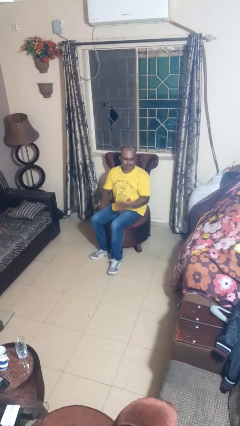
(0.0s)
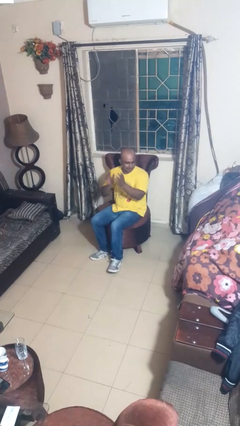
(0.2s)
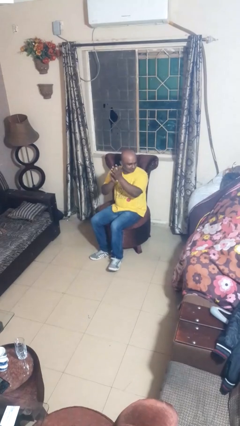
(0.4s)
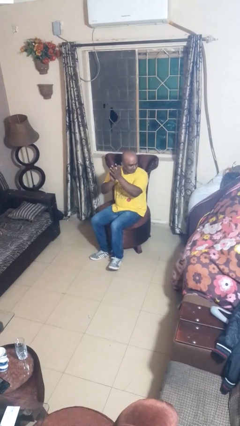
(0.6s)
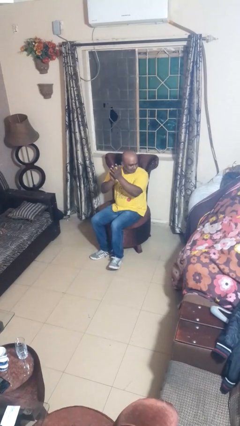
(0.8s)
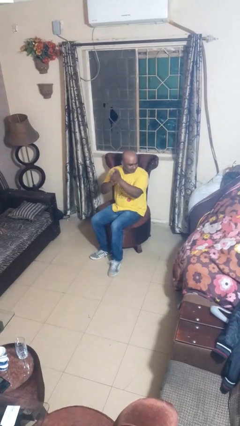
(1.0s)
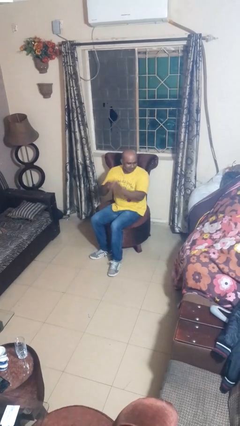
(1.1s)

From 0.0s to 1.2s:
person claps hands

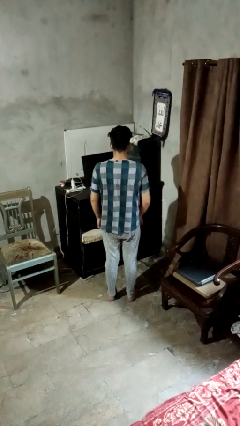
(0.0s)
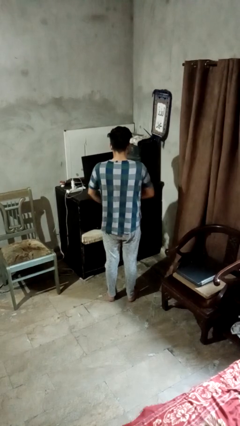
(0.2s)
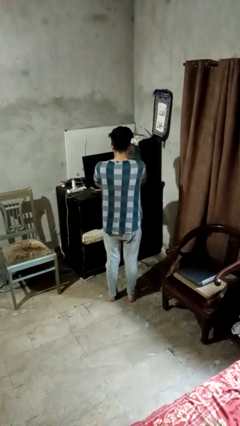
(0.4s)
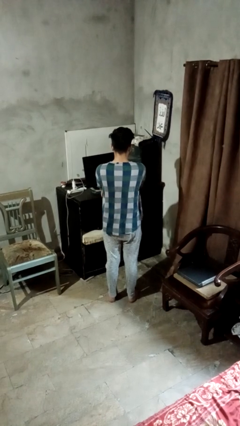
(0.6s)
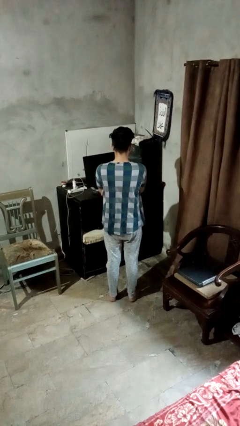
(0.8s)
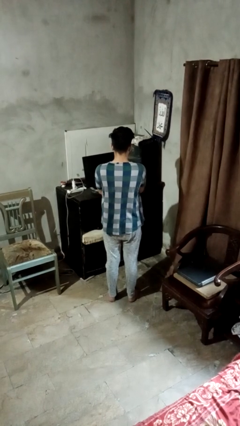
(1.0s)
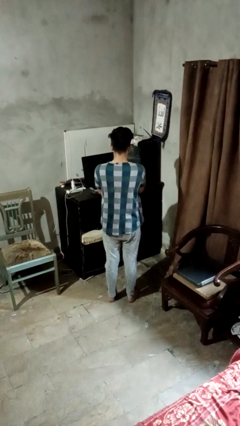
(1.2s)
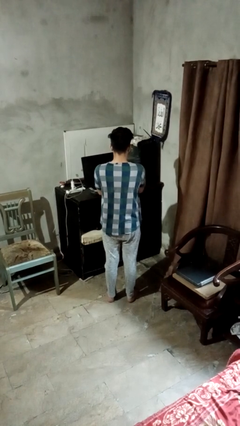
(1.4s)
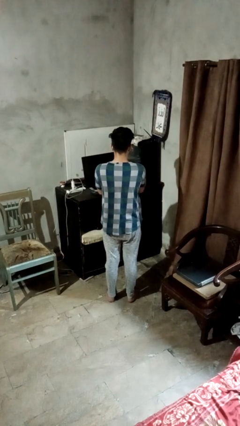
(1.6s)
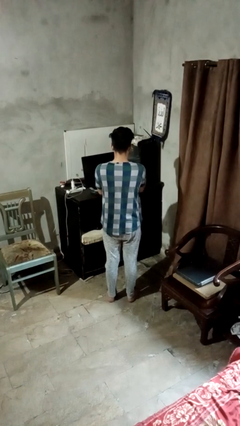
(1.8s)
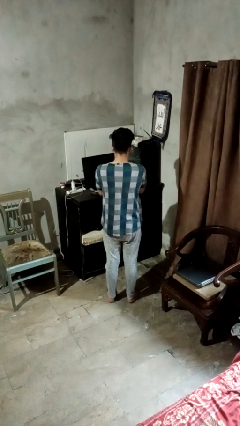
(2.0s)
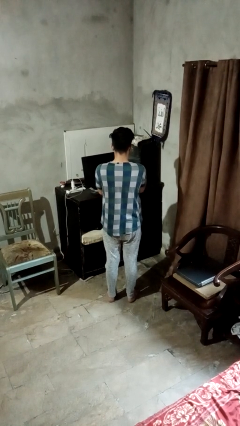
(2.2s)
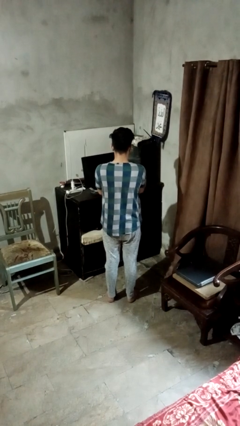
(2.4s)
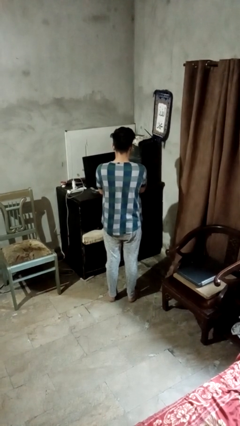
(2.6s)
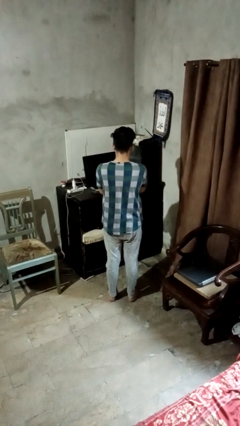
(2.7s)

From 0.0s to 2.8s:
person crosses arms

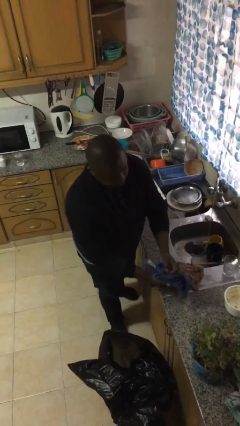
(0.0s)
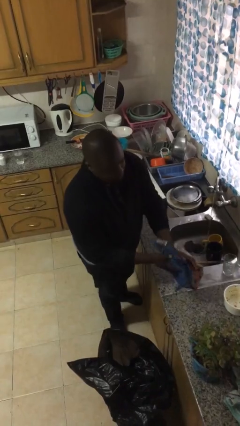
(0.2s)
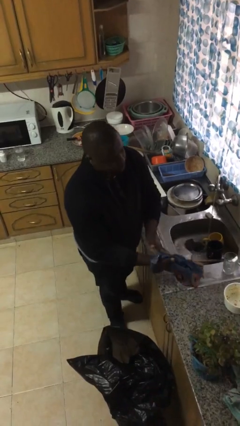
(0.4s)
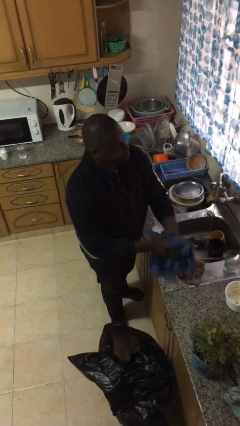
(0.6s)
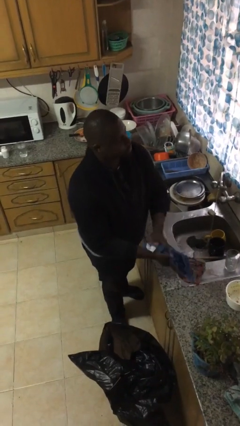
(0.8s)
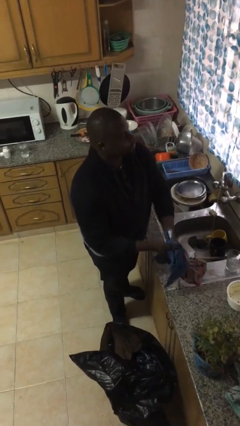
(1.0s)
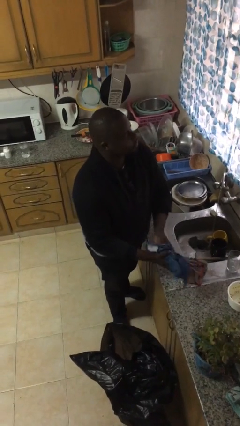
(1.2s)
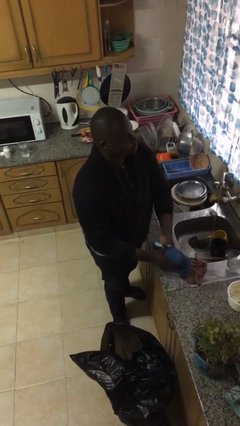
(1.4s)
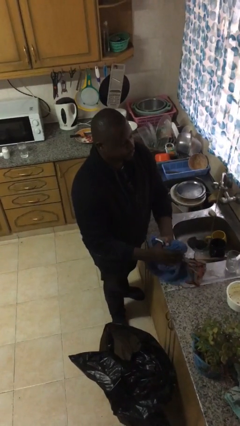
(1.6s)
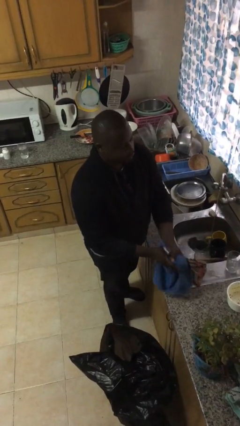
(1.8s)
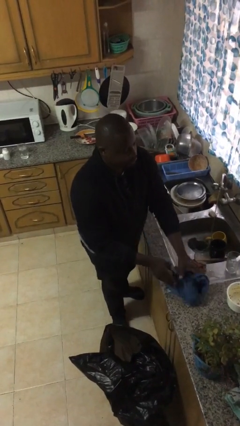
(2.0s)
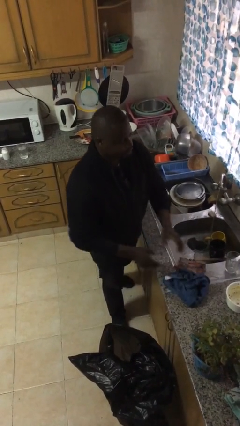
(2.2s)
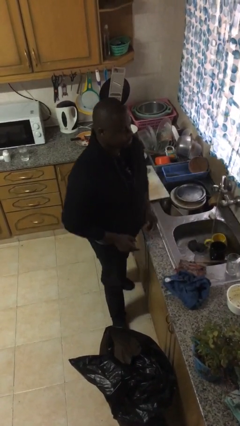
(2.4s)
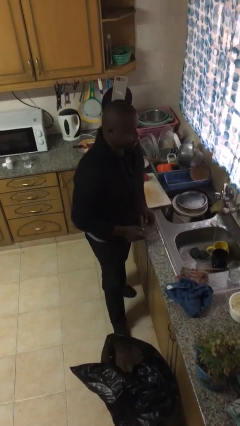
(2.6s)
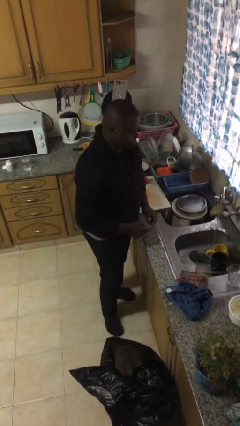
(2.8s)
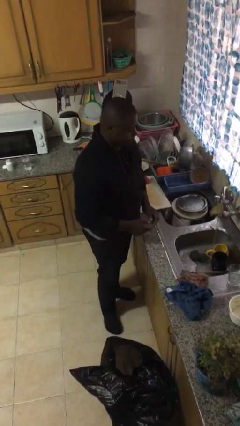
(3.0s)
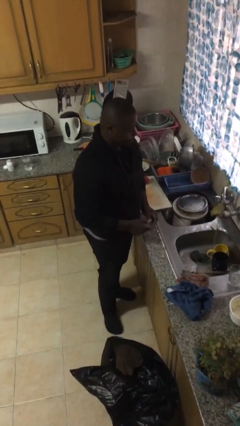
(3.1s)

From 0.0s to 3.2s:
person dries hands with towel

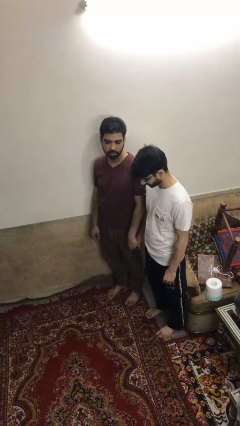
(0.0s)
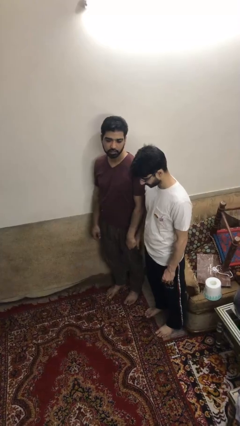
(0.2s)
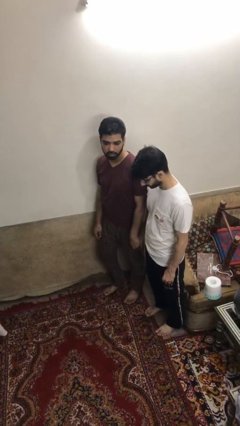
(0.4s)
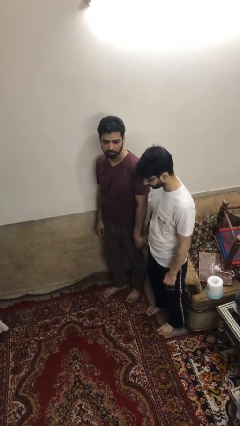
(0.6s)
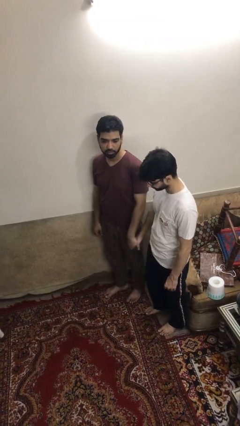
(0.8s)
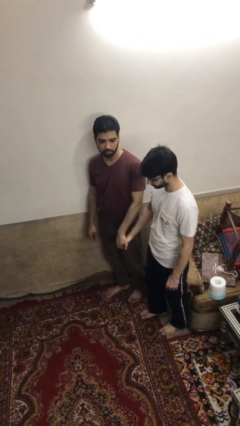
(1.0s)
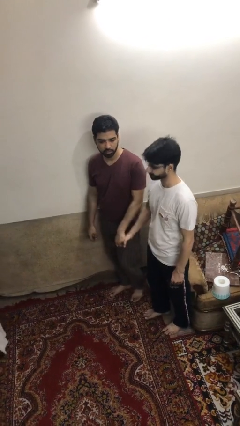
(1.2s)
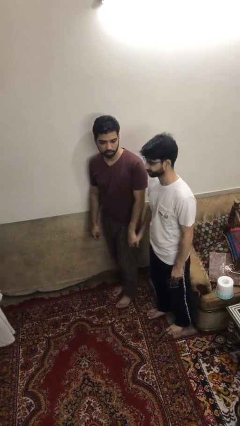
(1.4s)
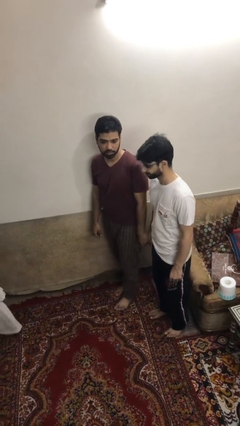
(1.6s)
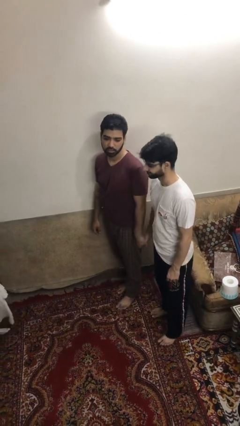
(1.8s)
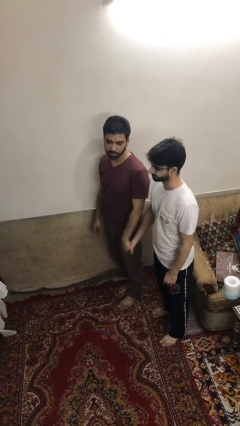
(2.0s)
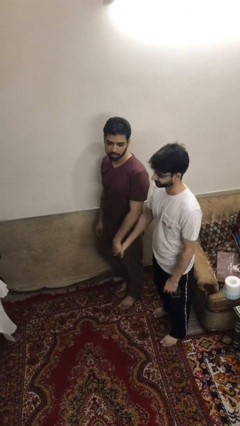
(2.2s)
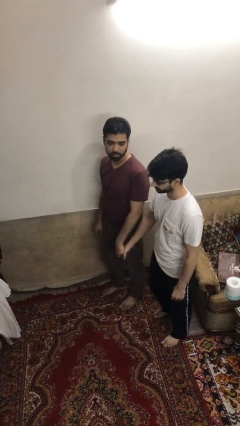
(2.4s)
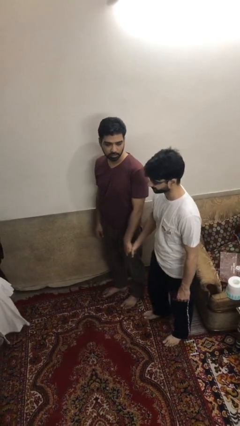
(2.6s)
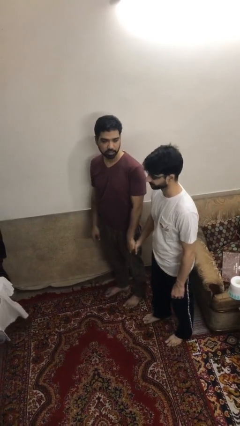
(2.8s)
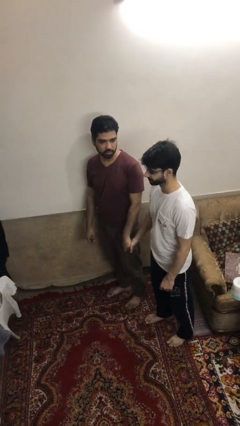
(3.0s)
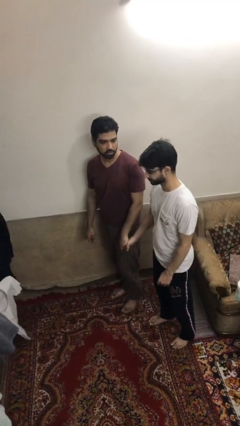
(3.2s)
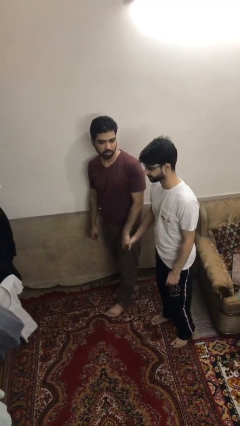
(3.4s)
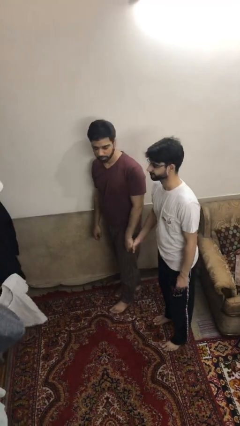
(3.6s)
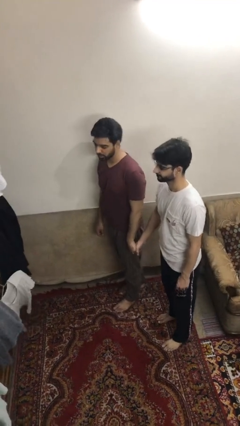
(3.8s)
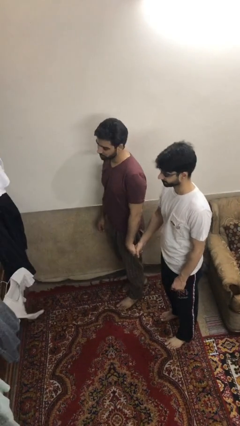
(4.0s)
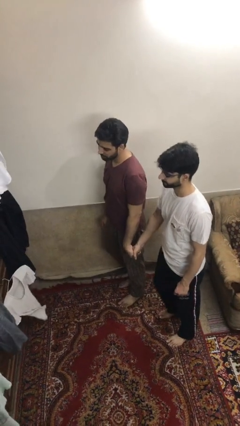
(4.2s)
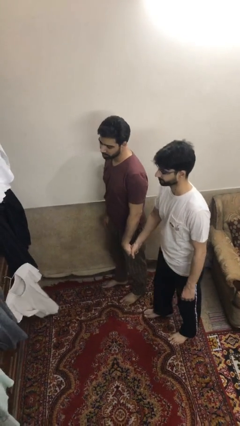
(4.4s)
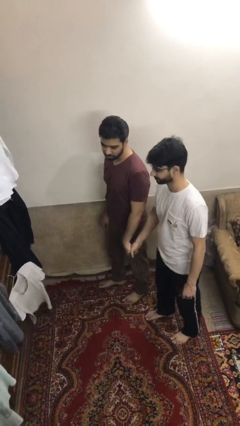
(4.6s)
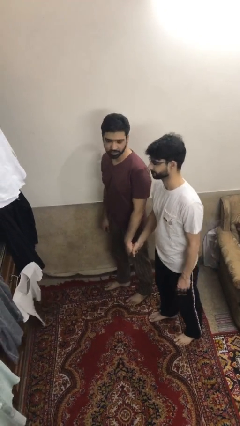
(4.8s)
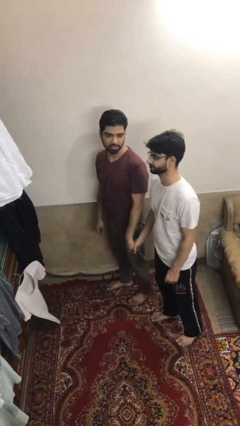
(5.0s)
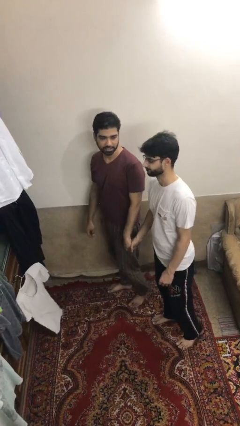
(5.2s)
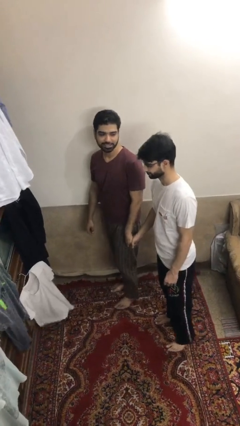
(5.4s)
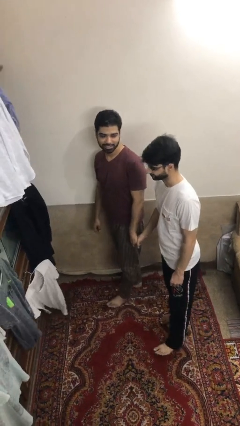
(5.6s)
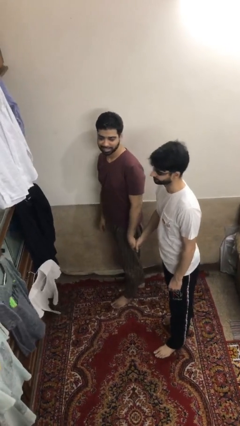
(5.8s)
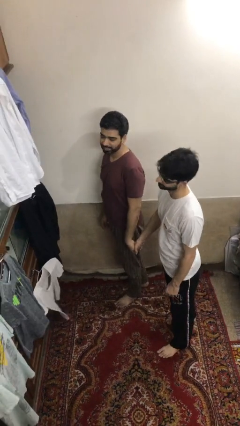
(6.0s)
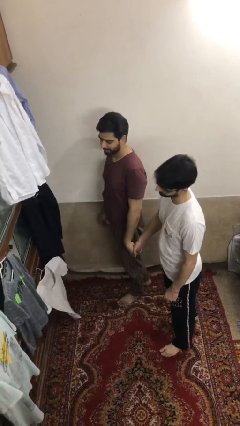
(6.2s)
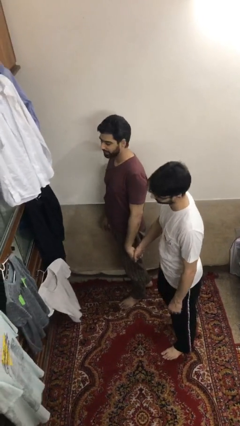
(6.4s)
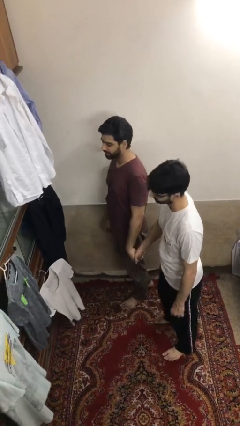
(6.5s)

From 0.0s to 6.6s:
person holds hand

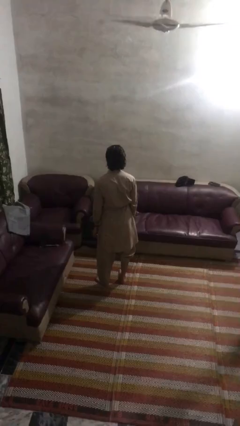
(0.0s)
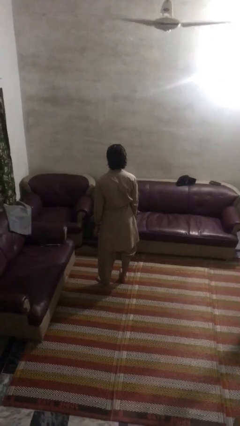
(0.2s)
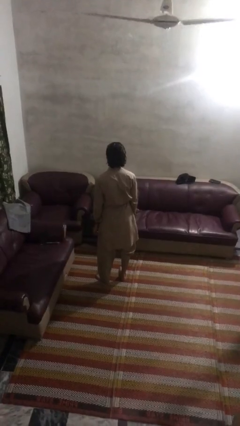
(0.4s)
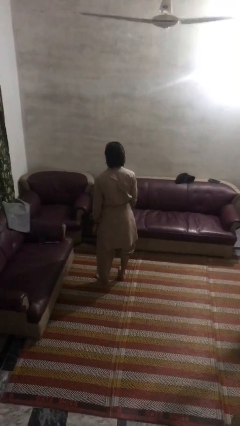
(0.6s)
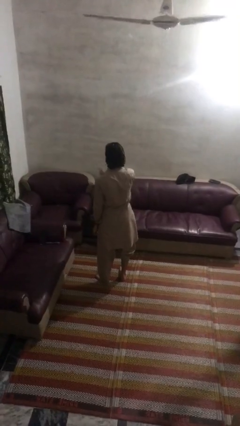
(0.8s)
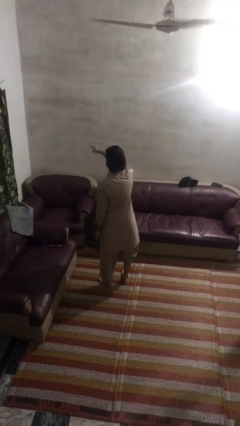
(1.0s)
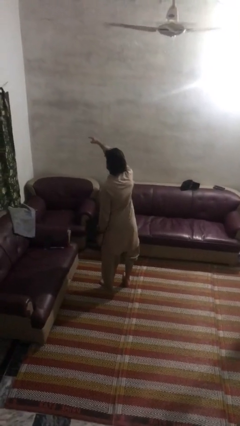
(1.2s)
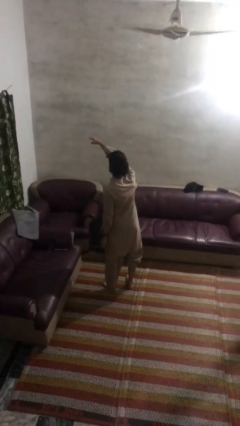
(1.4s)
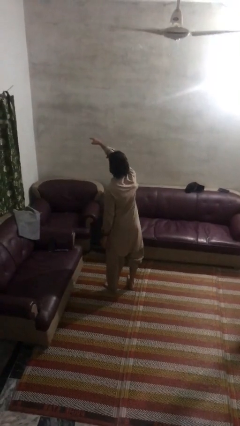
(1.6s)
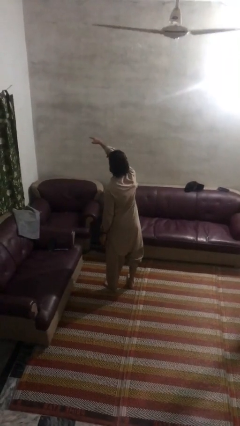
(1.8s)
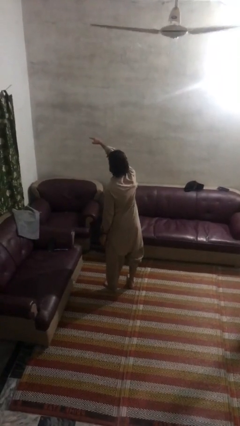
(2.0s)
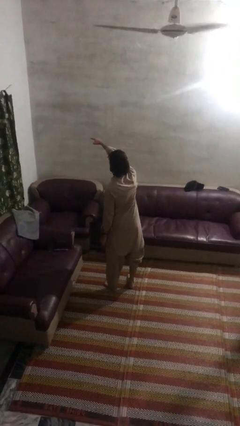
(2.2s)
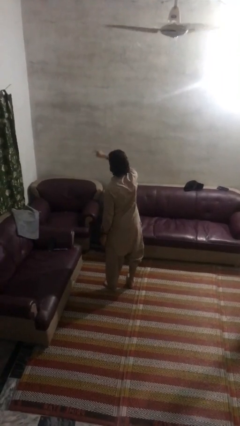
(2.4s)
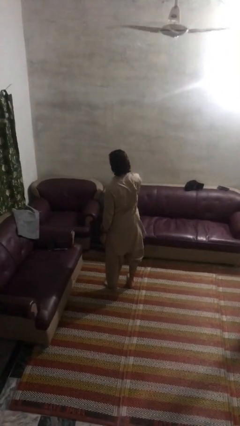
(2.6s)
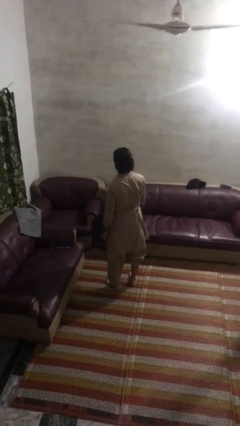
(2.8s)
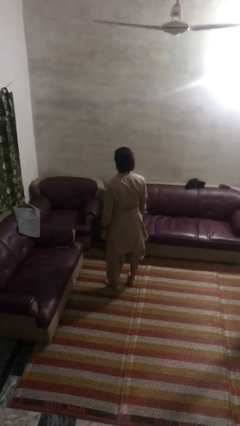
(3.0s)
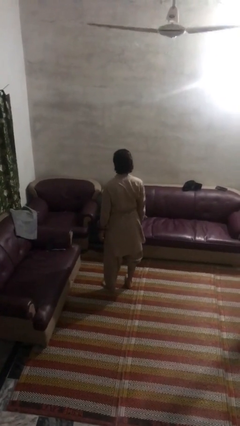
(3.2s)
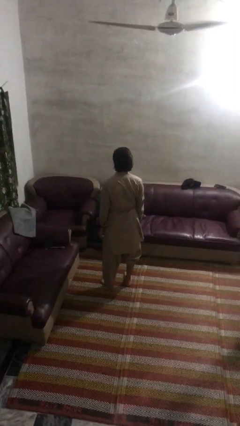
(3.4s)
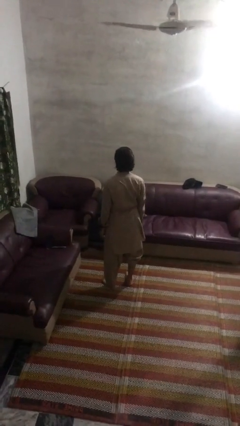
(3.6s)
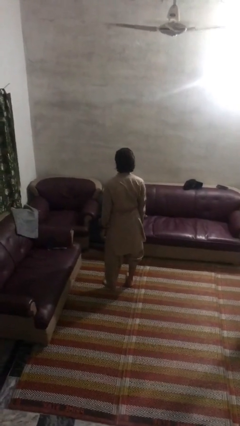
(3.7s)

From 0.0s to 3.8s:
person points at person
